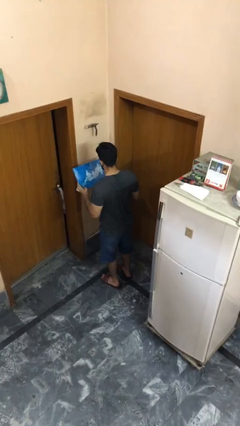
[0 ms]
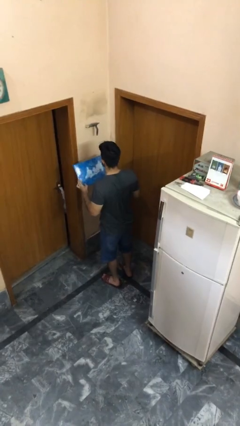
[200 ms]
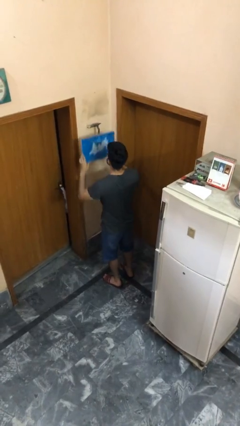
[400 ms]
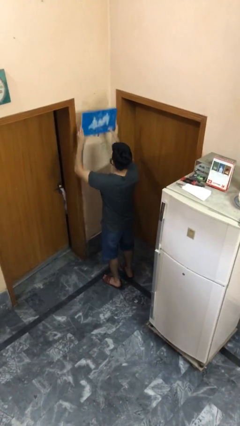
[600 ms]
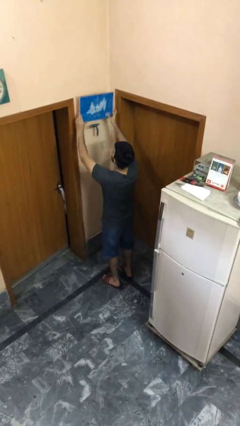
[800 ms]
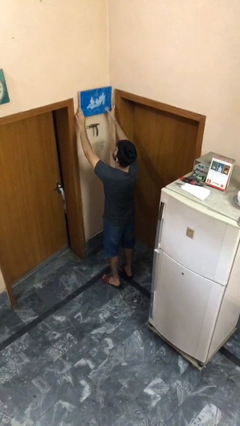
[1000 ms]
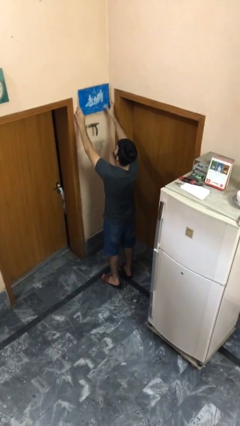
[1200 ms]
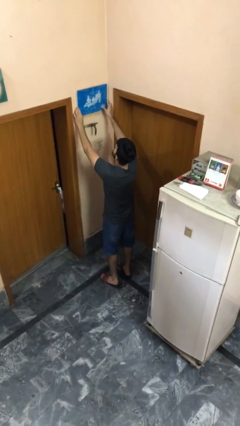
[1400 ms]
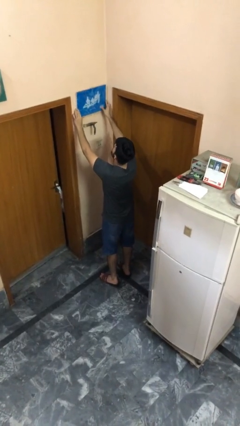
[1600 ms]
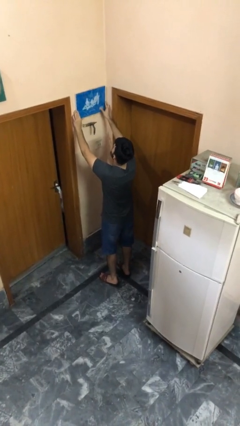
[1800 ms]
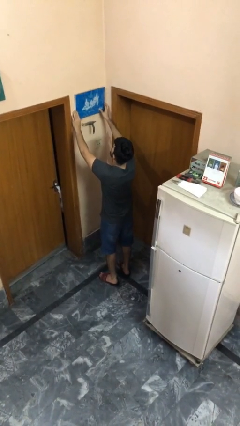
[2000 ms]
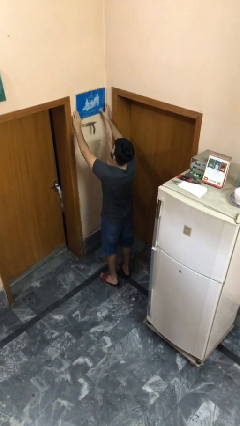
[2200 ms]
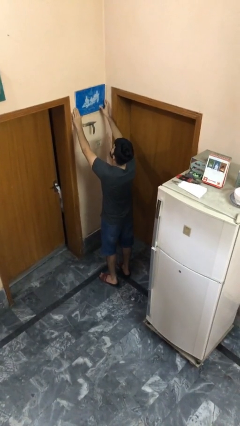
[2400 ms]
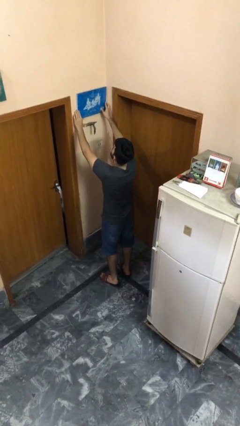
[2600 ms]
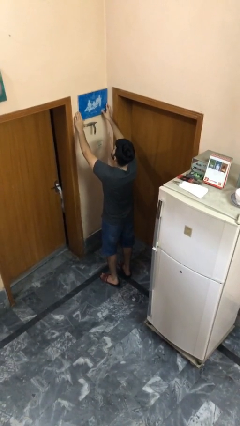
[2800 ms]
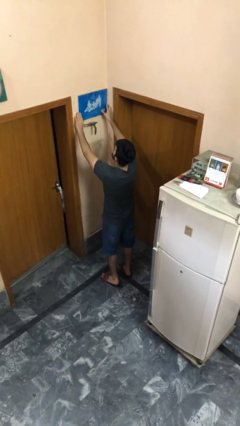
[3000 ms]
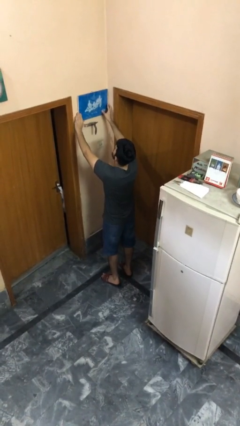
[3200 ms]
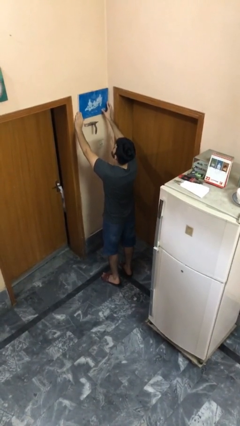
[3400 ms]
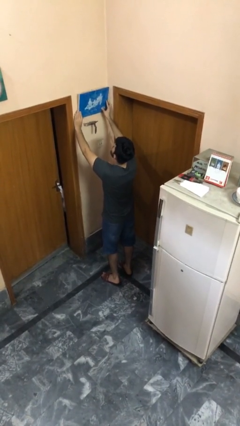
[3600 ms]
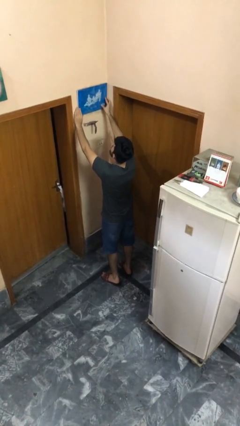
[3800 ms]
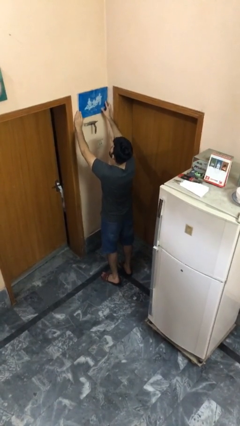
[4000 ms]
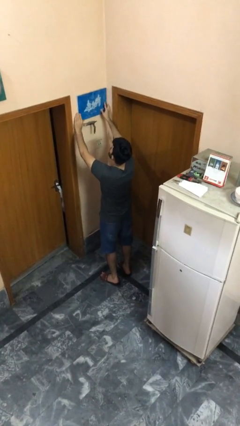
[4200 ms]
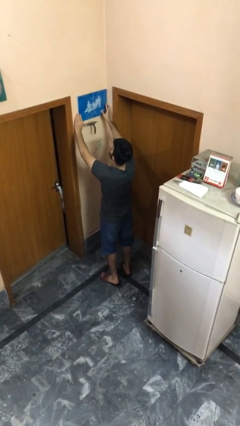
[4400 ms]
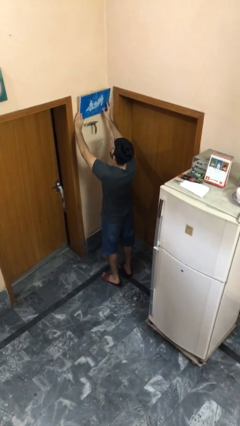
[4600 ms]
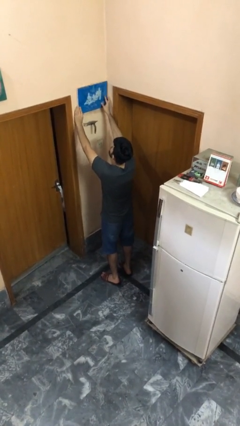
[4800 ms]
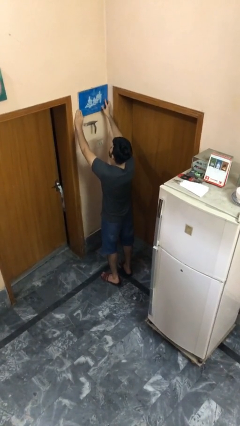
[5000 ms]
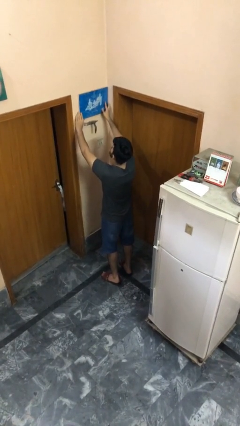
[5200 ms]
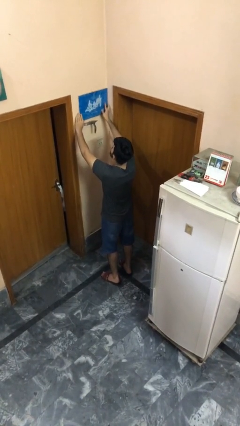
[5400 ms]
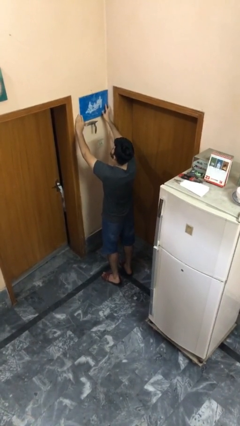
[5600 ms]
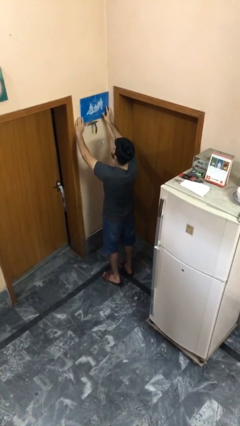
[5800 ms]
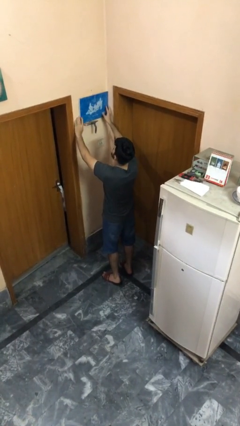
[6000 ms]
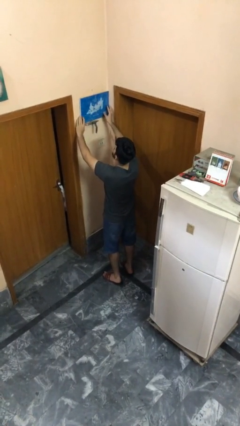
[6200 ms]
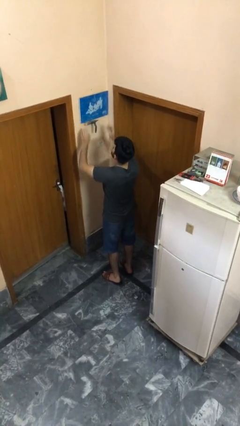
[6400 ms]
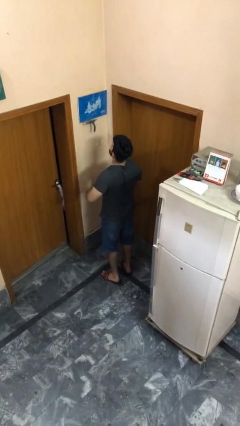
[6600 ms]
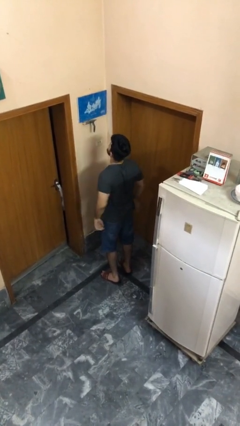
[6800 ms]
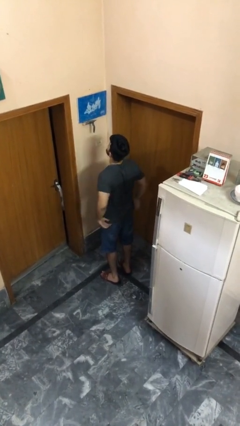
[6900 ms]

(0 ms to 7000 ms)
person puts up picture frame

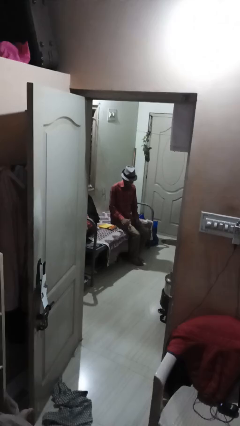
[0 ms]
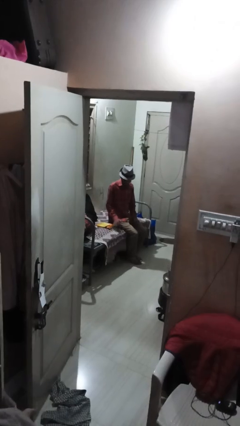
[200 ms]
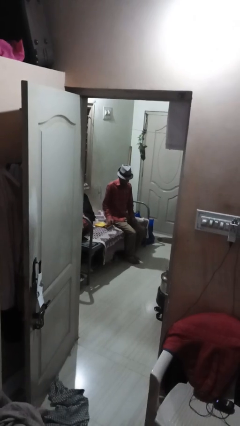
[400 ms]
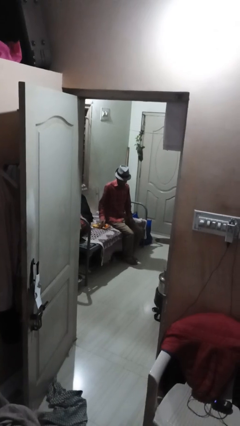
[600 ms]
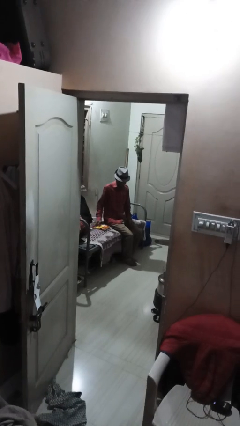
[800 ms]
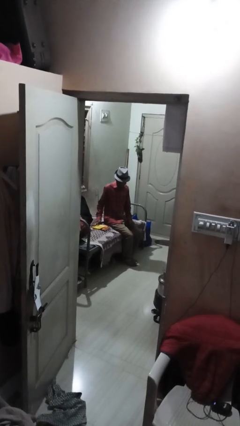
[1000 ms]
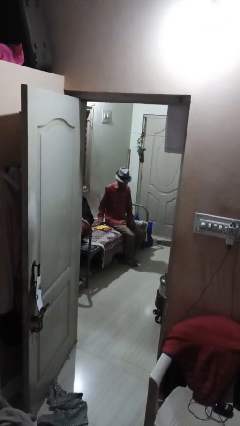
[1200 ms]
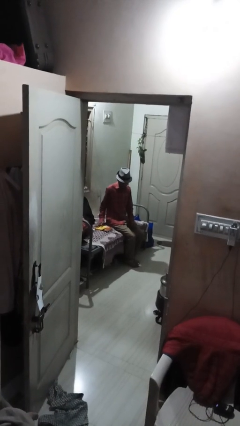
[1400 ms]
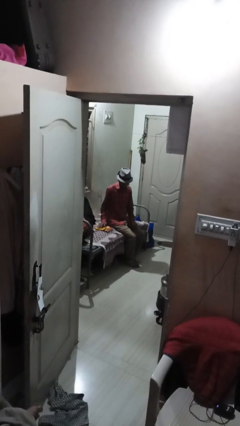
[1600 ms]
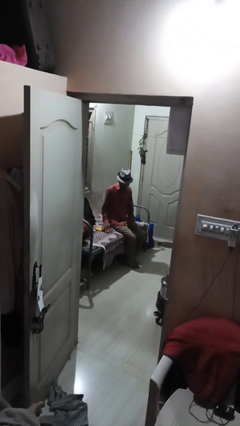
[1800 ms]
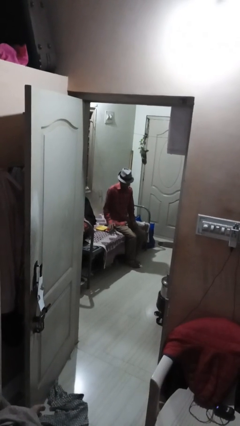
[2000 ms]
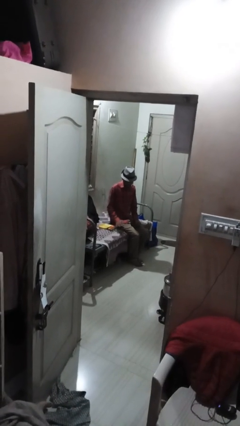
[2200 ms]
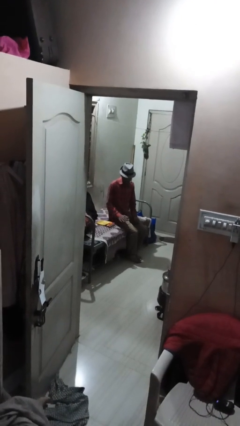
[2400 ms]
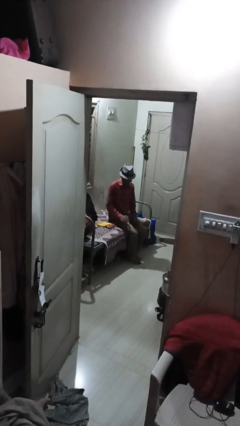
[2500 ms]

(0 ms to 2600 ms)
person waves hand over object

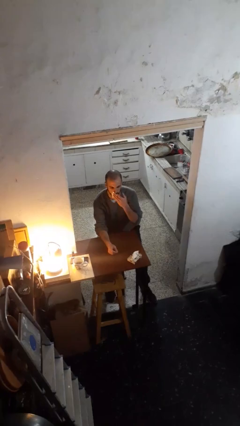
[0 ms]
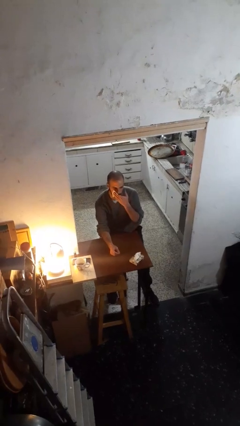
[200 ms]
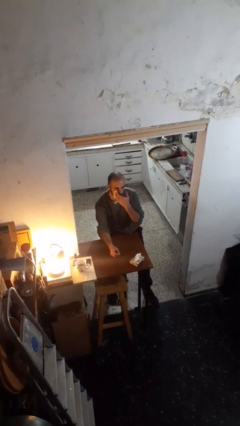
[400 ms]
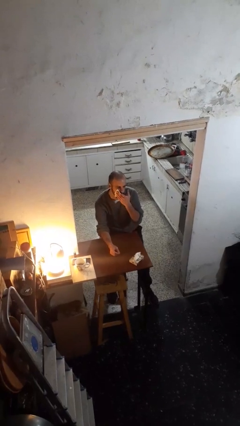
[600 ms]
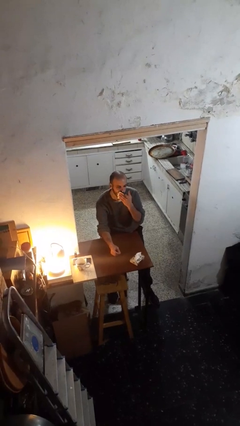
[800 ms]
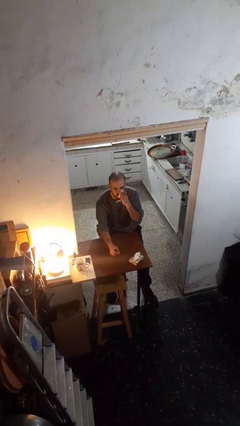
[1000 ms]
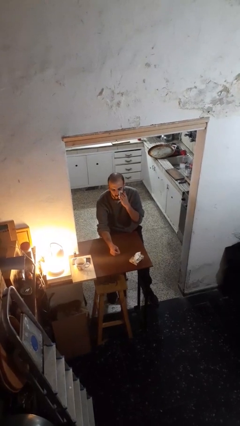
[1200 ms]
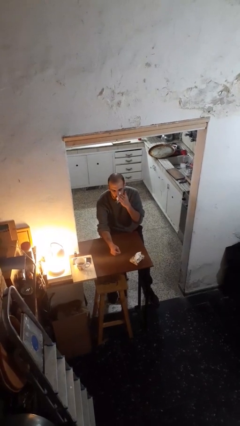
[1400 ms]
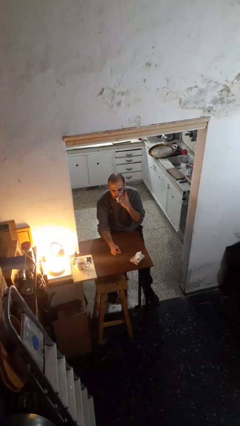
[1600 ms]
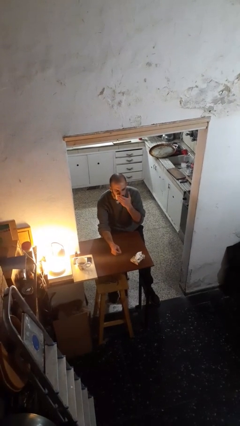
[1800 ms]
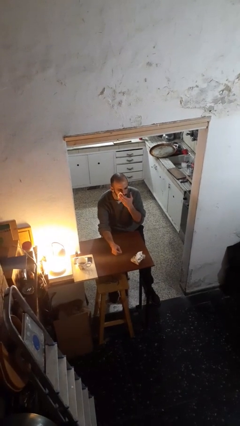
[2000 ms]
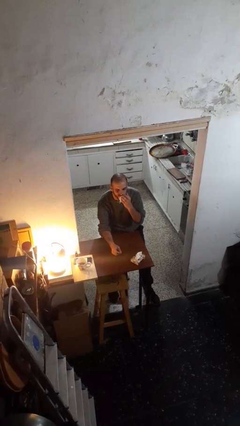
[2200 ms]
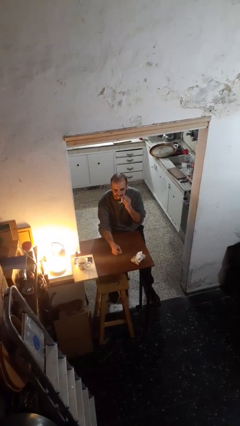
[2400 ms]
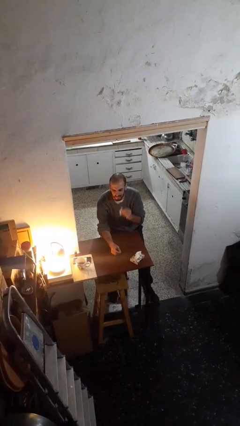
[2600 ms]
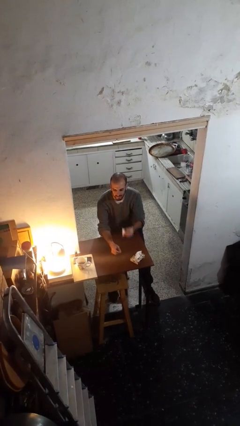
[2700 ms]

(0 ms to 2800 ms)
person wipes mouth with napkin

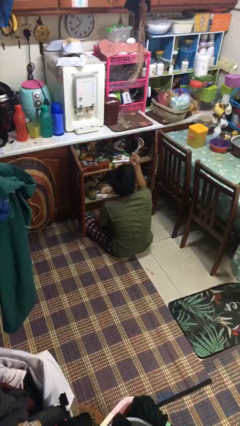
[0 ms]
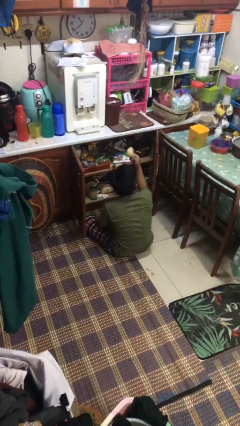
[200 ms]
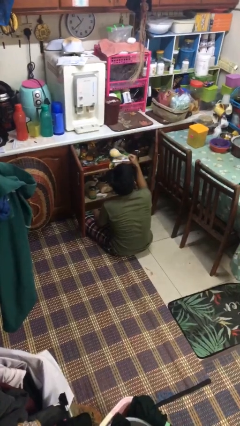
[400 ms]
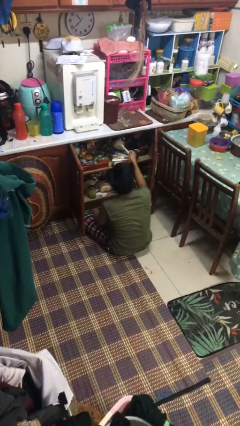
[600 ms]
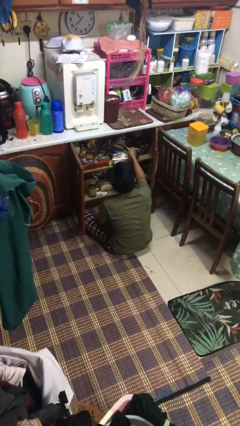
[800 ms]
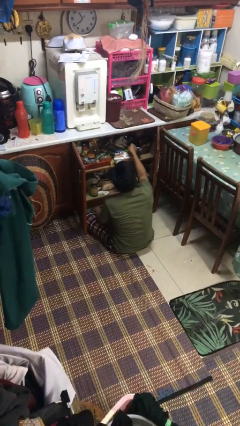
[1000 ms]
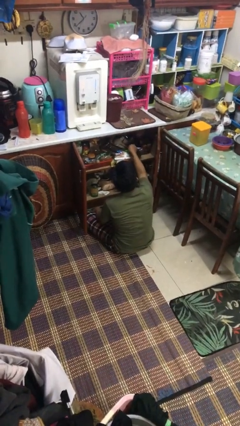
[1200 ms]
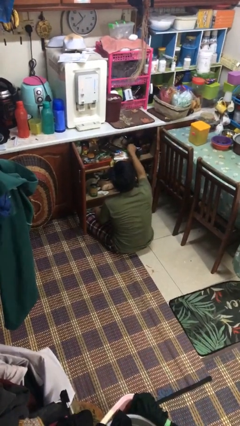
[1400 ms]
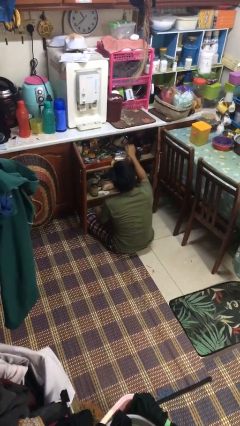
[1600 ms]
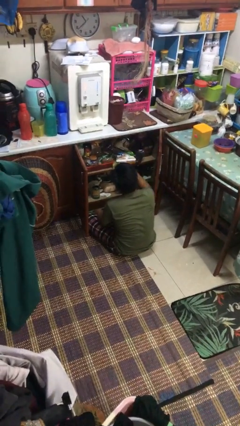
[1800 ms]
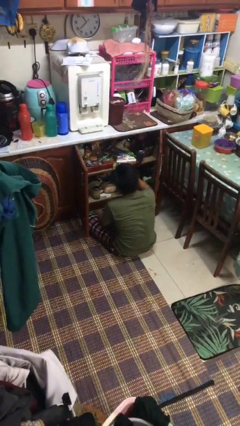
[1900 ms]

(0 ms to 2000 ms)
person puts object into kitchen drawer

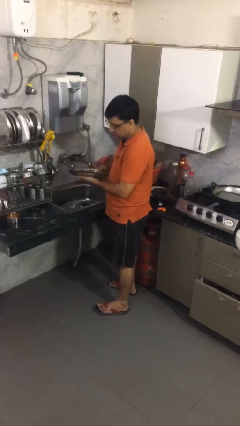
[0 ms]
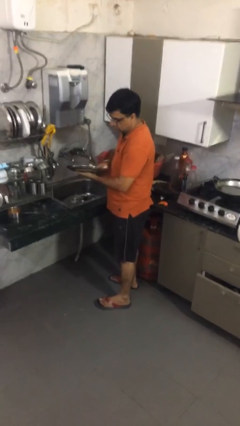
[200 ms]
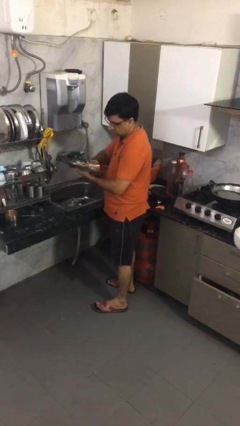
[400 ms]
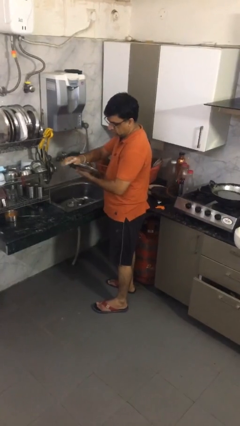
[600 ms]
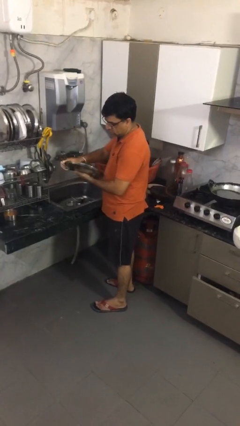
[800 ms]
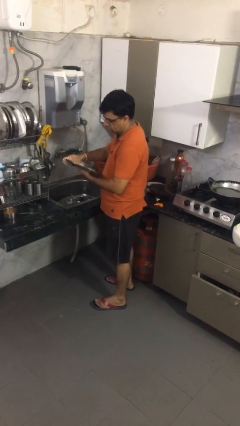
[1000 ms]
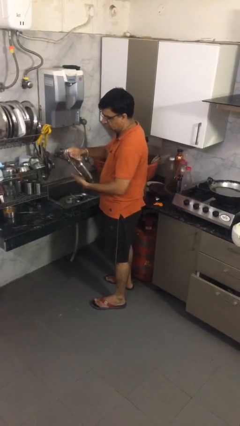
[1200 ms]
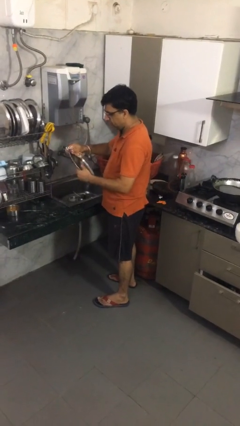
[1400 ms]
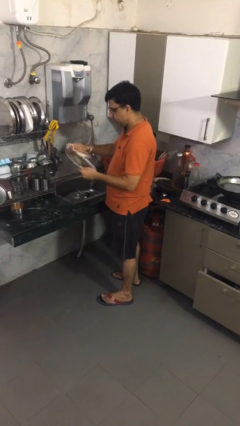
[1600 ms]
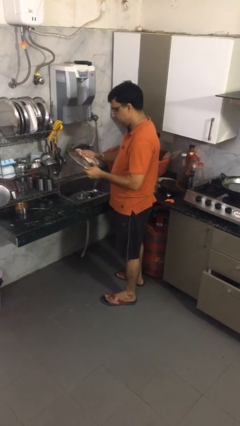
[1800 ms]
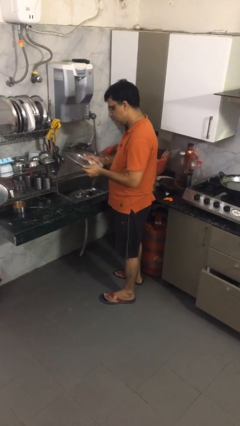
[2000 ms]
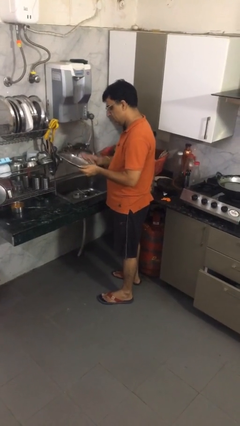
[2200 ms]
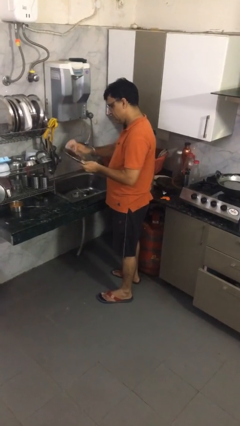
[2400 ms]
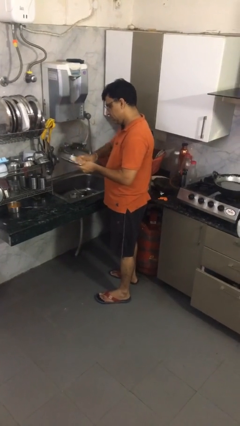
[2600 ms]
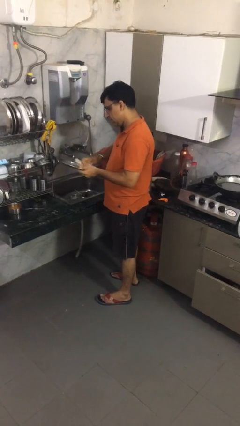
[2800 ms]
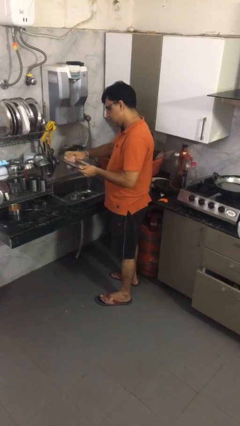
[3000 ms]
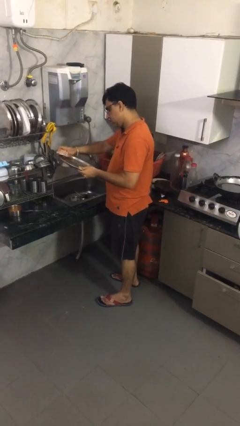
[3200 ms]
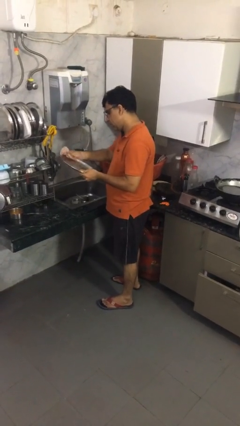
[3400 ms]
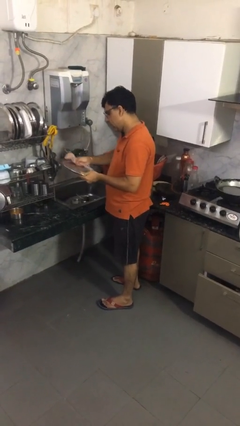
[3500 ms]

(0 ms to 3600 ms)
person dries dish
